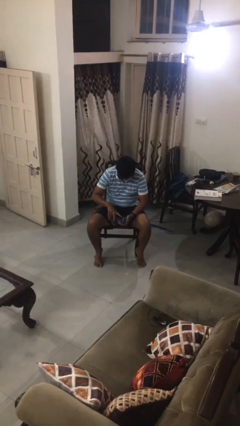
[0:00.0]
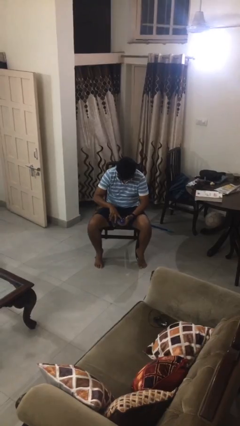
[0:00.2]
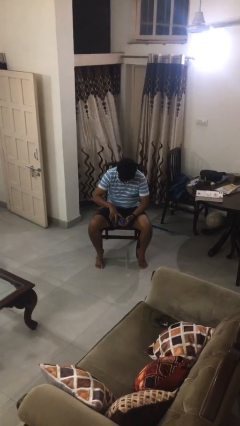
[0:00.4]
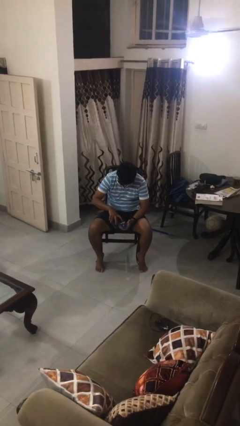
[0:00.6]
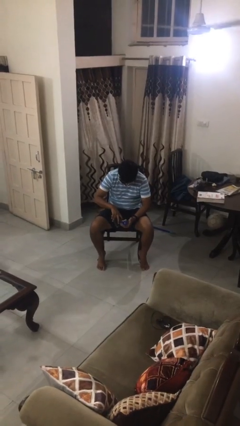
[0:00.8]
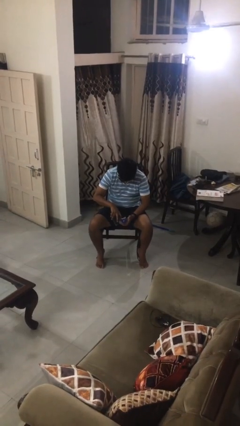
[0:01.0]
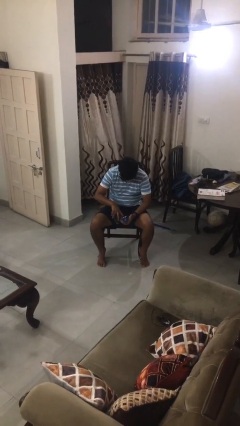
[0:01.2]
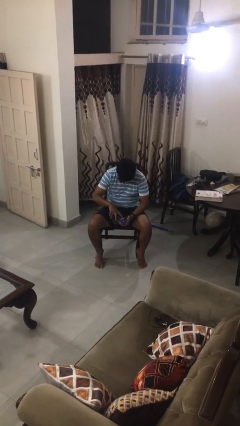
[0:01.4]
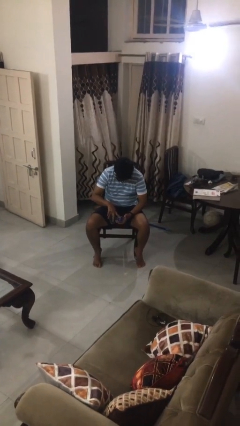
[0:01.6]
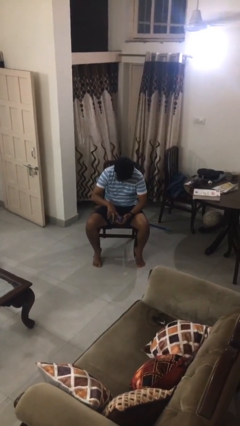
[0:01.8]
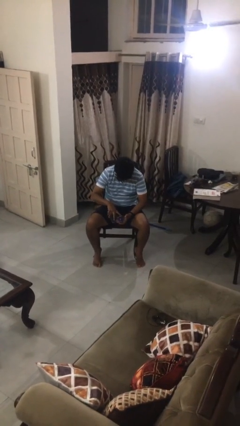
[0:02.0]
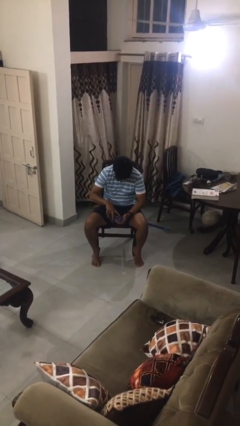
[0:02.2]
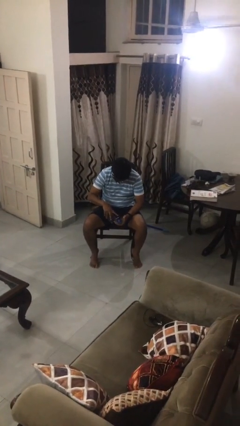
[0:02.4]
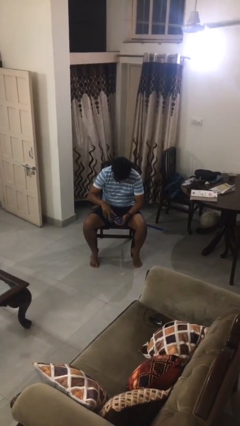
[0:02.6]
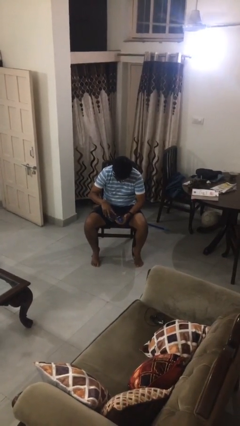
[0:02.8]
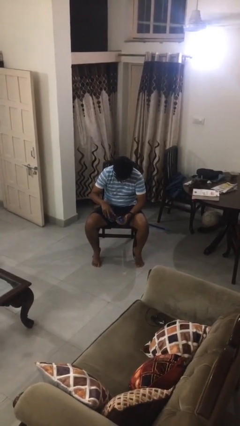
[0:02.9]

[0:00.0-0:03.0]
person searches jewelry box

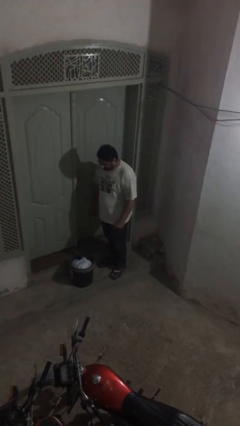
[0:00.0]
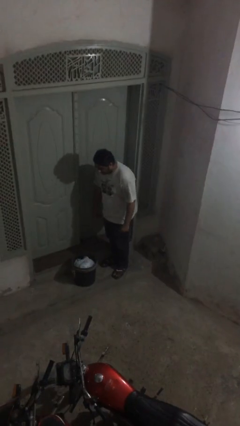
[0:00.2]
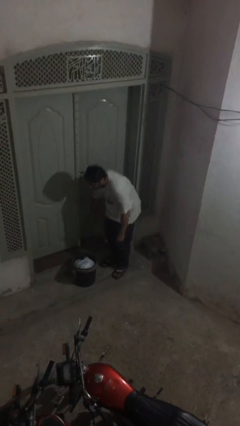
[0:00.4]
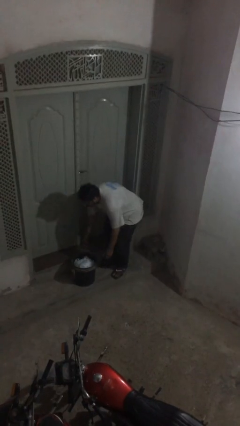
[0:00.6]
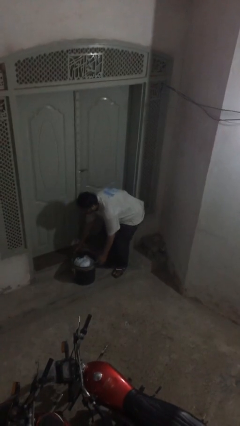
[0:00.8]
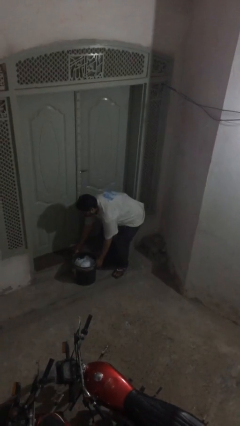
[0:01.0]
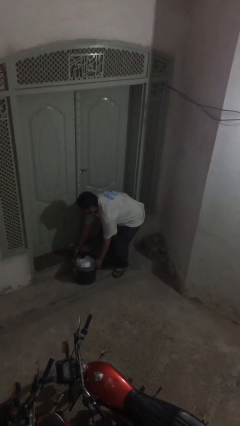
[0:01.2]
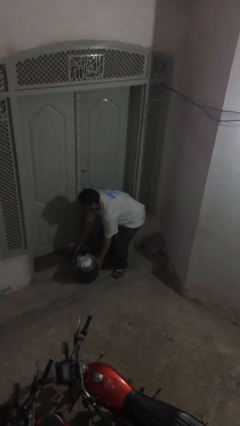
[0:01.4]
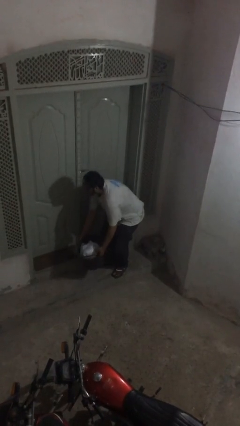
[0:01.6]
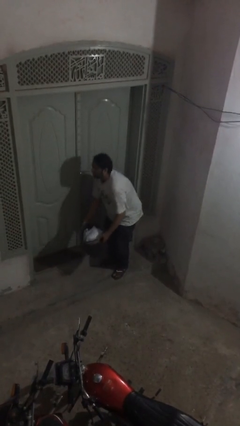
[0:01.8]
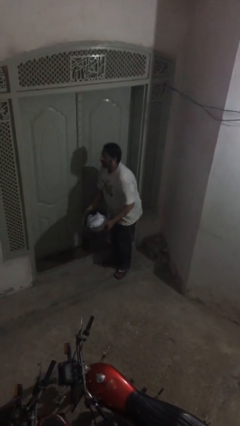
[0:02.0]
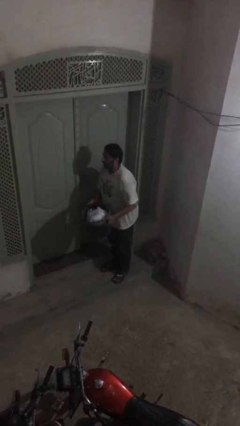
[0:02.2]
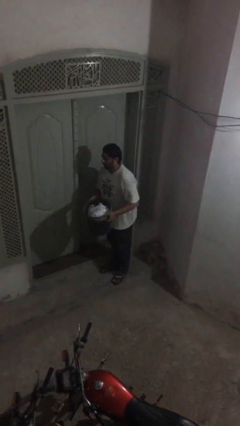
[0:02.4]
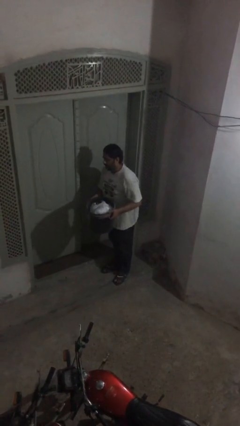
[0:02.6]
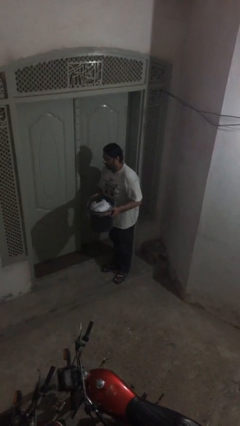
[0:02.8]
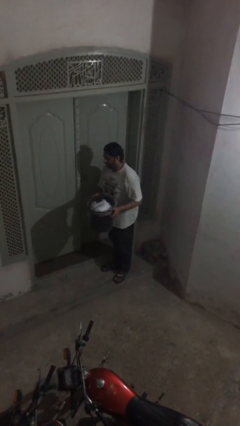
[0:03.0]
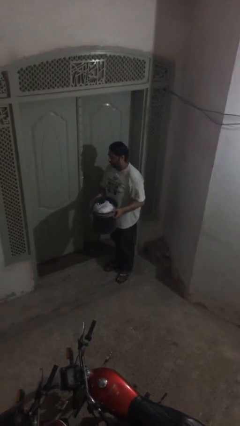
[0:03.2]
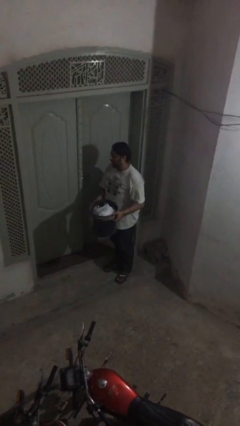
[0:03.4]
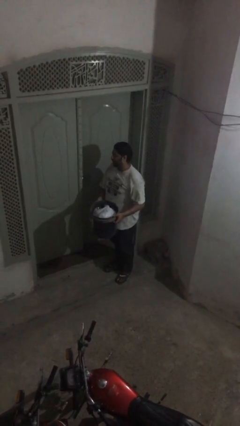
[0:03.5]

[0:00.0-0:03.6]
person picks up object from floor

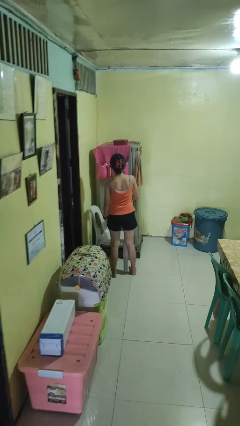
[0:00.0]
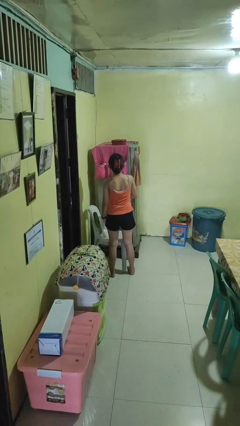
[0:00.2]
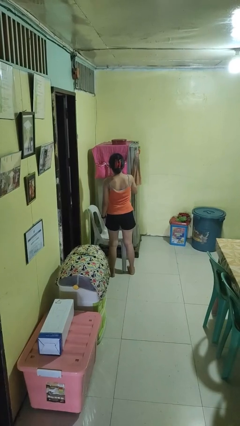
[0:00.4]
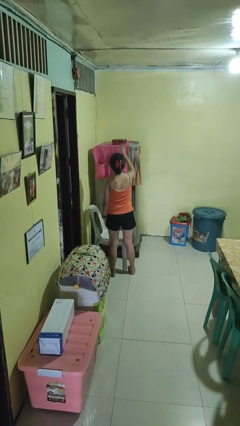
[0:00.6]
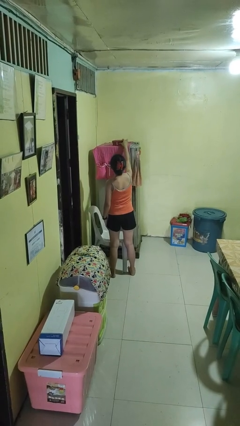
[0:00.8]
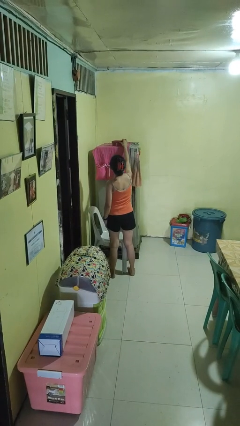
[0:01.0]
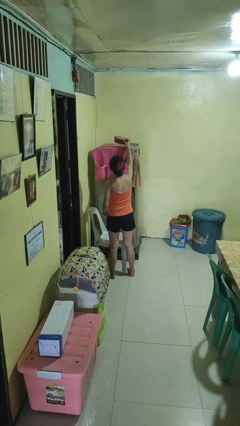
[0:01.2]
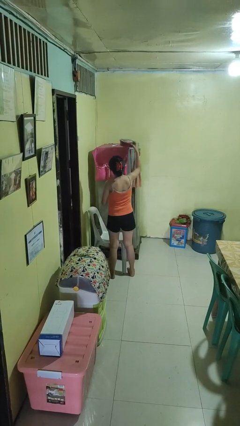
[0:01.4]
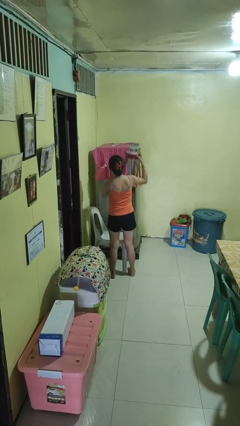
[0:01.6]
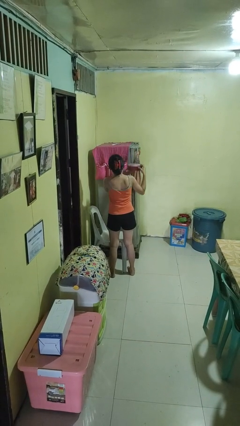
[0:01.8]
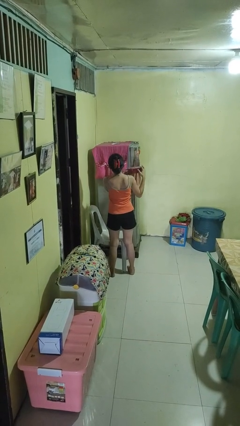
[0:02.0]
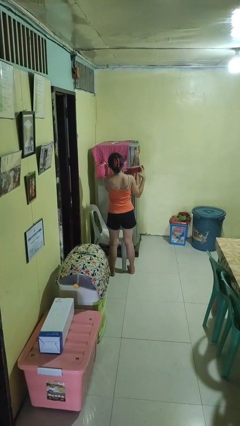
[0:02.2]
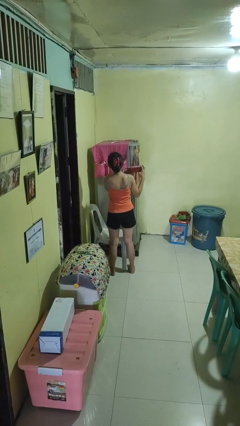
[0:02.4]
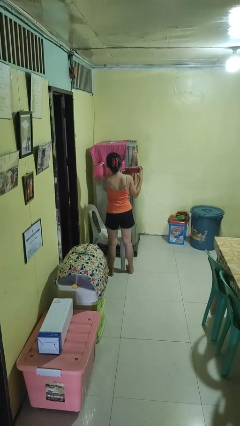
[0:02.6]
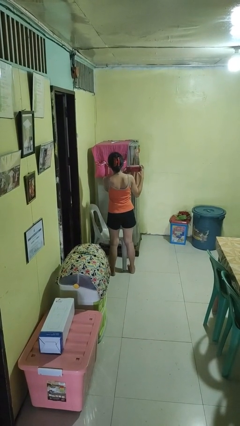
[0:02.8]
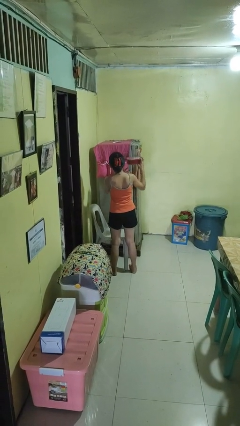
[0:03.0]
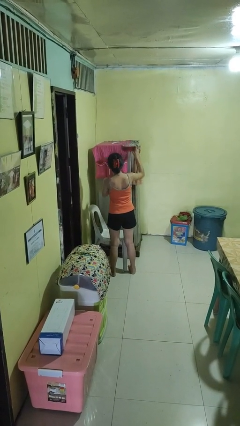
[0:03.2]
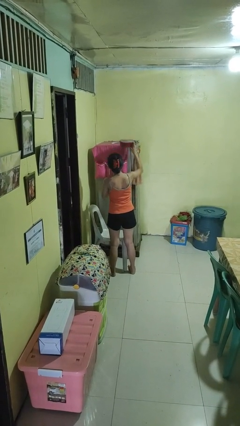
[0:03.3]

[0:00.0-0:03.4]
person picks up object from shelf

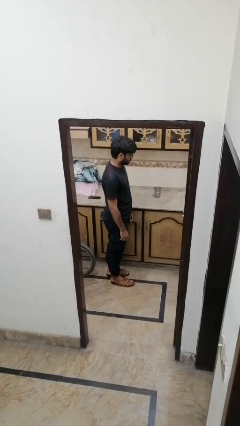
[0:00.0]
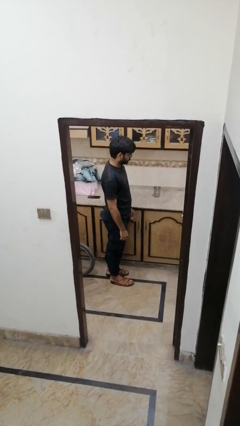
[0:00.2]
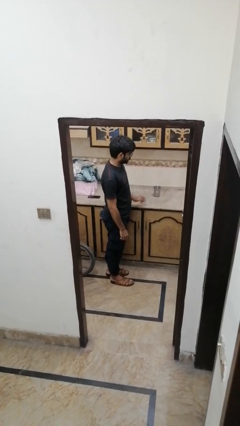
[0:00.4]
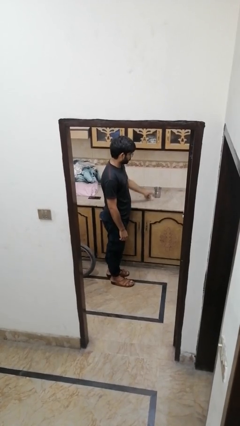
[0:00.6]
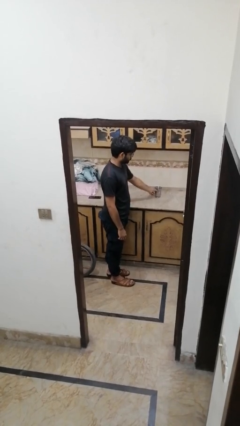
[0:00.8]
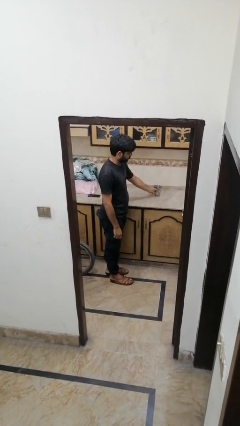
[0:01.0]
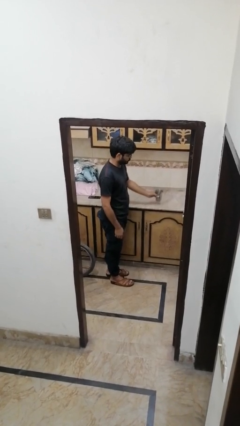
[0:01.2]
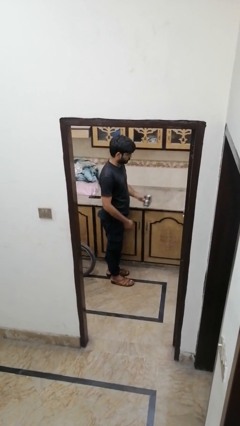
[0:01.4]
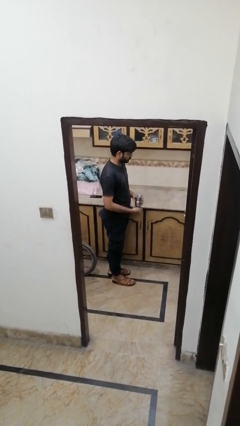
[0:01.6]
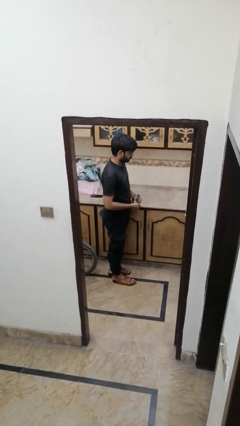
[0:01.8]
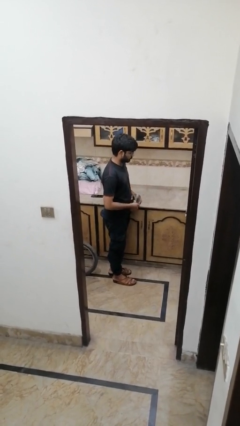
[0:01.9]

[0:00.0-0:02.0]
person picks up object from countertop

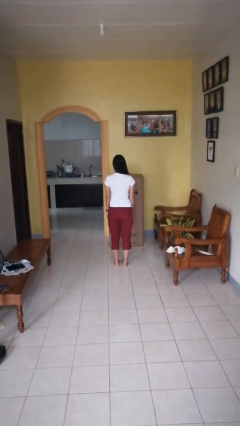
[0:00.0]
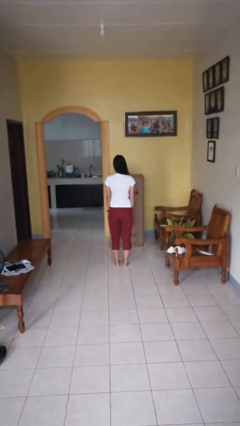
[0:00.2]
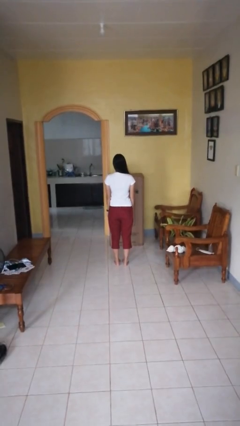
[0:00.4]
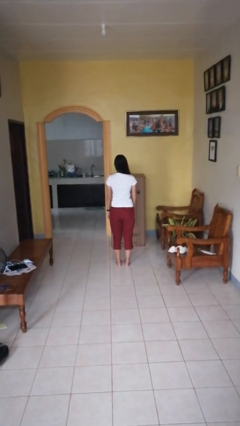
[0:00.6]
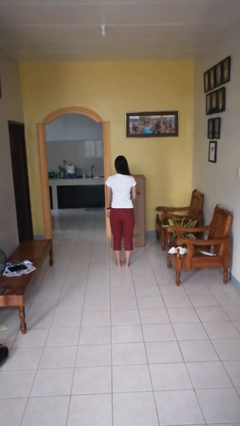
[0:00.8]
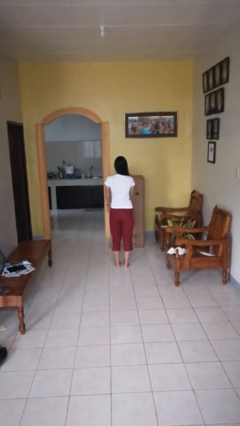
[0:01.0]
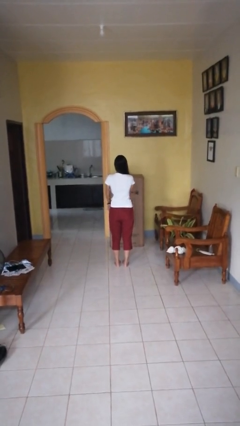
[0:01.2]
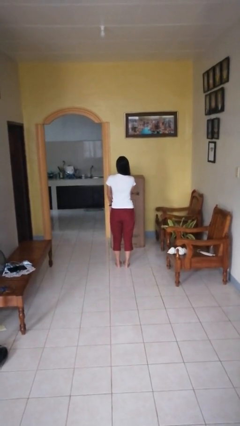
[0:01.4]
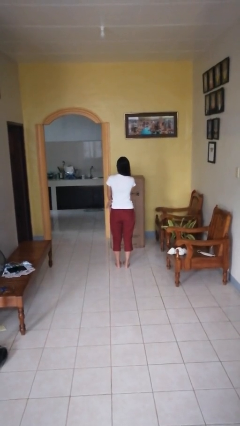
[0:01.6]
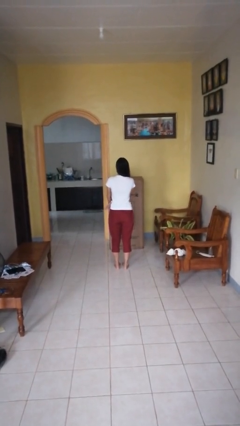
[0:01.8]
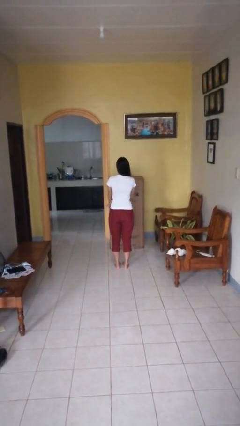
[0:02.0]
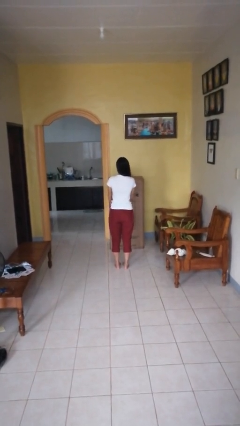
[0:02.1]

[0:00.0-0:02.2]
person swats bug

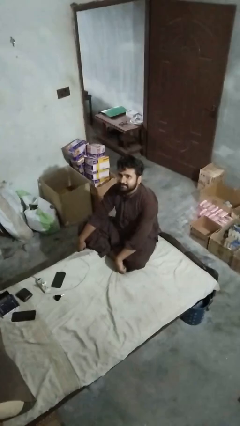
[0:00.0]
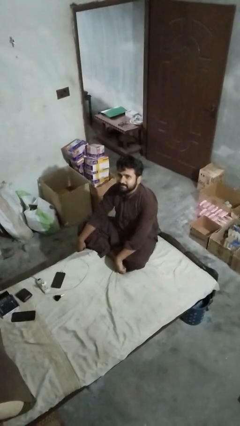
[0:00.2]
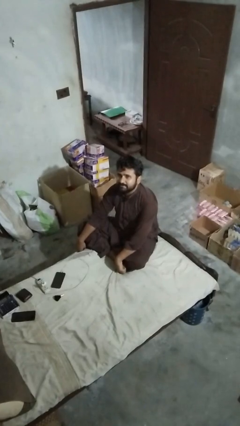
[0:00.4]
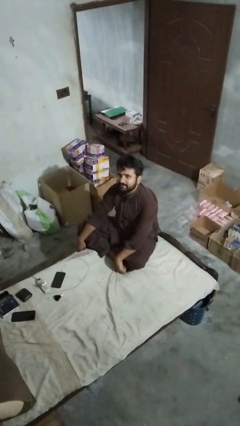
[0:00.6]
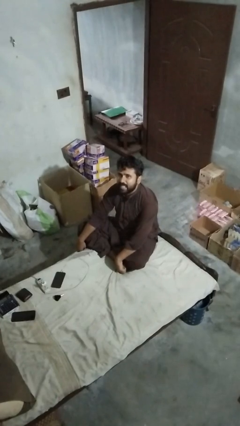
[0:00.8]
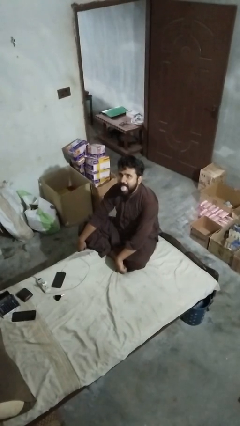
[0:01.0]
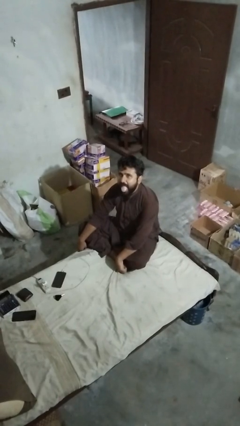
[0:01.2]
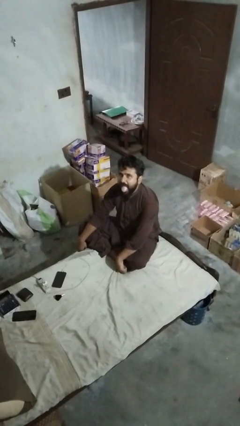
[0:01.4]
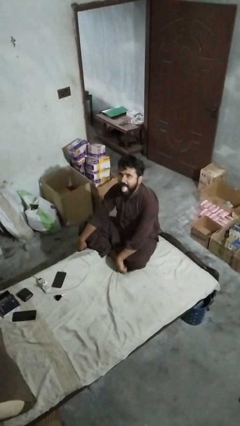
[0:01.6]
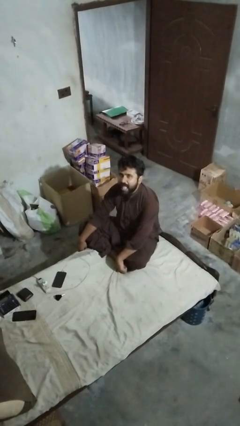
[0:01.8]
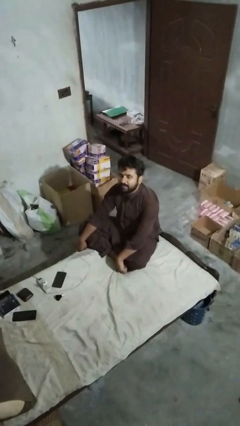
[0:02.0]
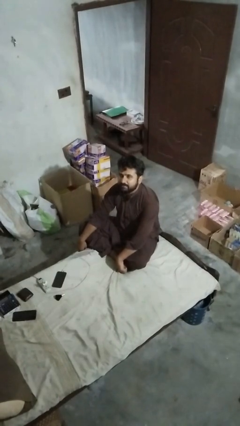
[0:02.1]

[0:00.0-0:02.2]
person sticks out tongue

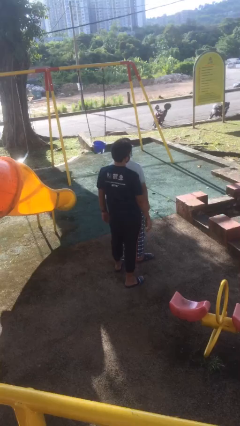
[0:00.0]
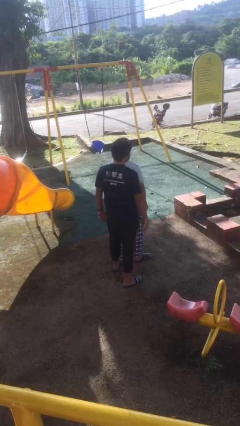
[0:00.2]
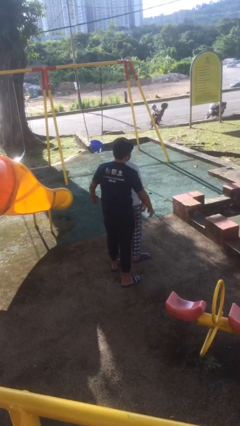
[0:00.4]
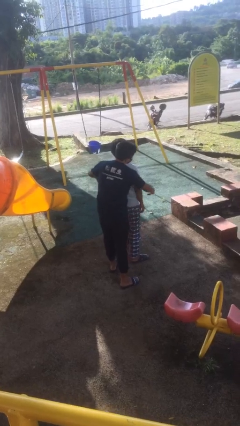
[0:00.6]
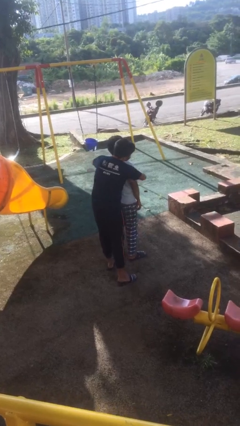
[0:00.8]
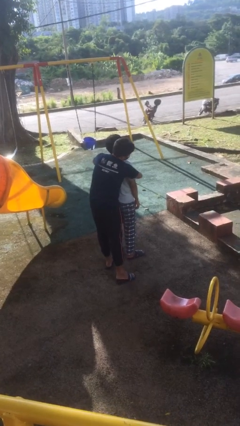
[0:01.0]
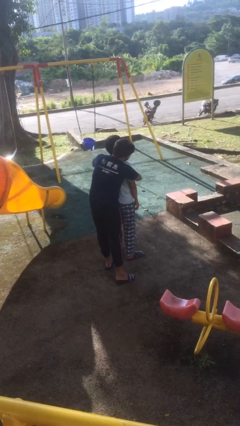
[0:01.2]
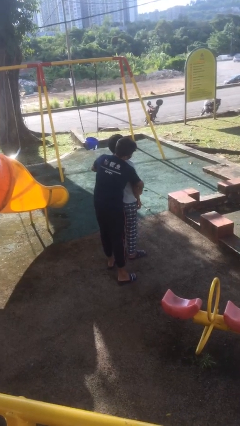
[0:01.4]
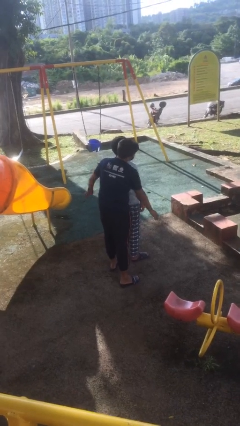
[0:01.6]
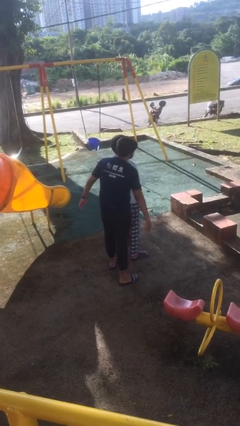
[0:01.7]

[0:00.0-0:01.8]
person hugs person from behind
